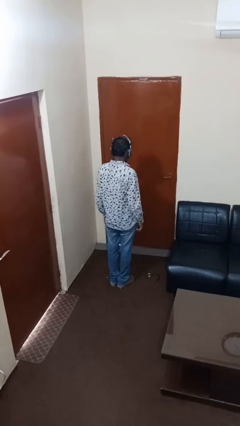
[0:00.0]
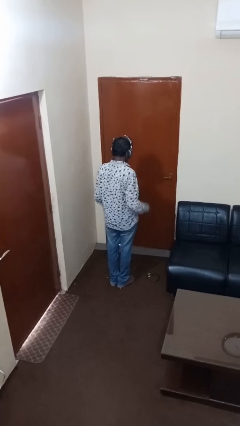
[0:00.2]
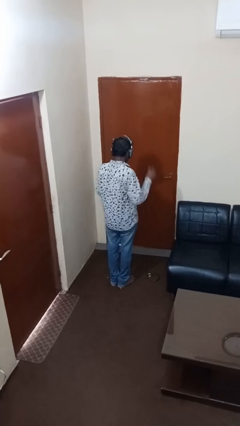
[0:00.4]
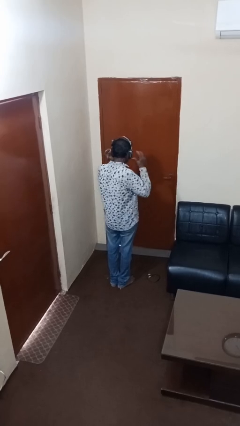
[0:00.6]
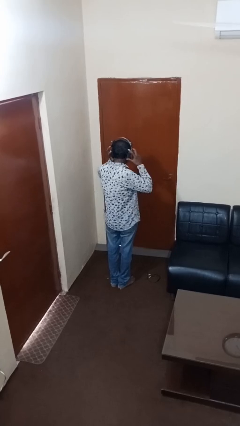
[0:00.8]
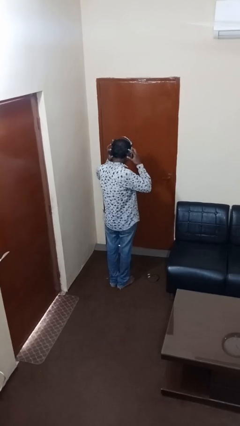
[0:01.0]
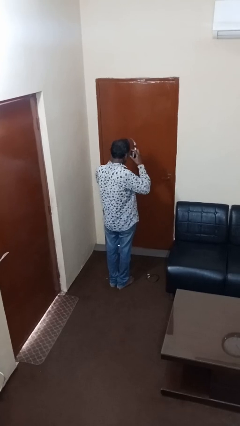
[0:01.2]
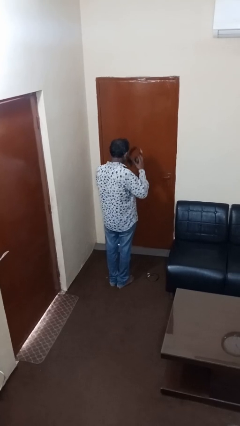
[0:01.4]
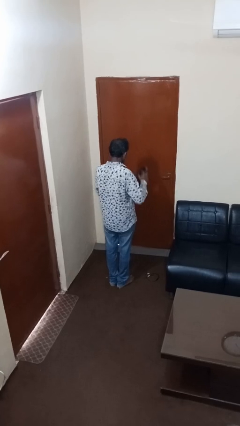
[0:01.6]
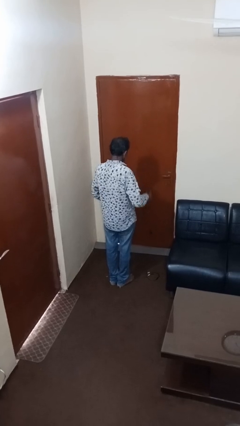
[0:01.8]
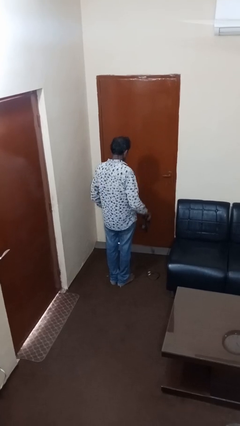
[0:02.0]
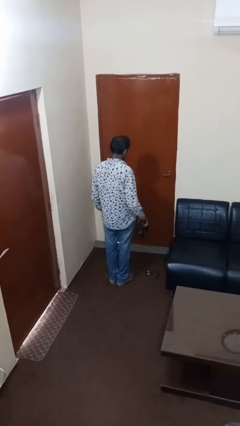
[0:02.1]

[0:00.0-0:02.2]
person takes off headphones

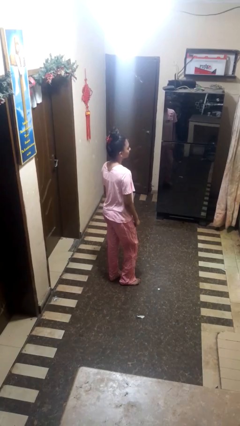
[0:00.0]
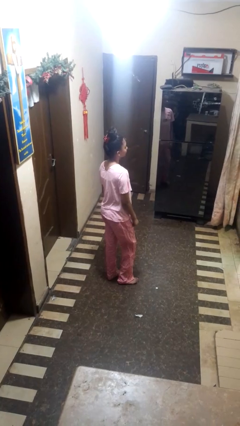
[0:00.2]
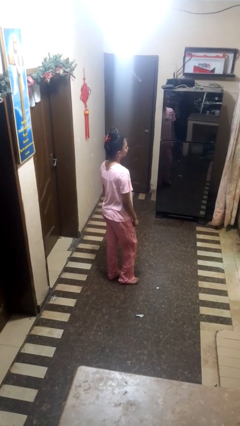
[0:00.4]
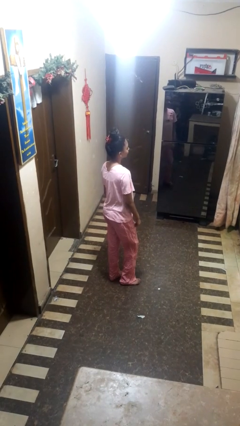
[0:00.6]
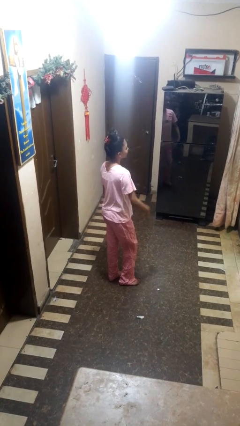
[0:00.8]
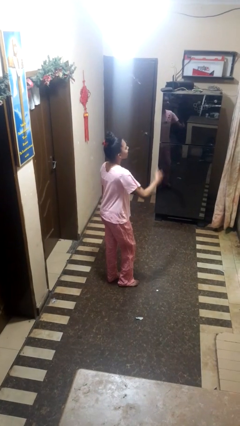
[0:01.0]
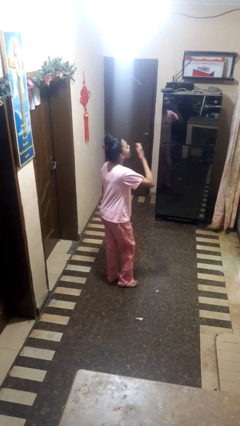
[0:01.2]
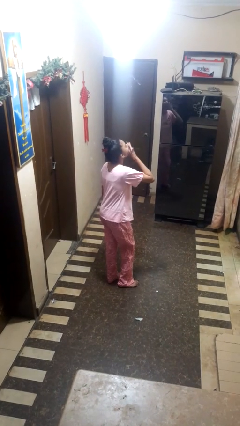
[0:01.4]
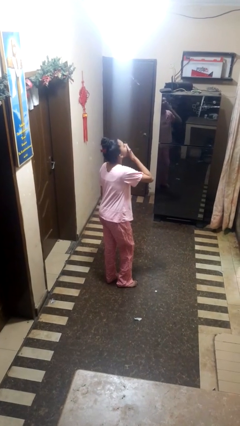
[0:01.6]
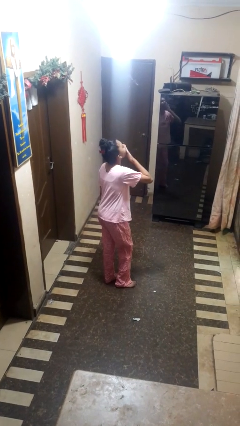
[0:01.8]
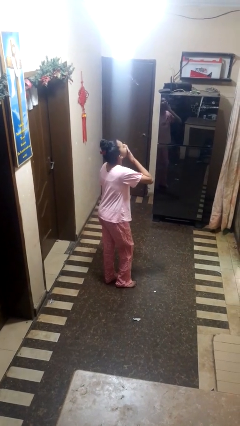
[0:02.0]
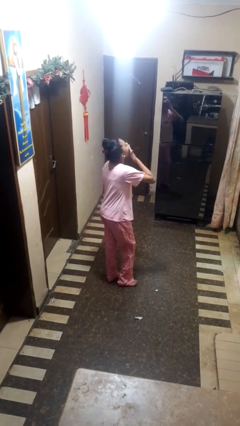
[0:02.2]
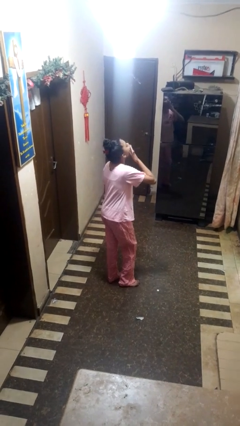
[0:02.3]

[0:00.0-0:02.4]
person yawns

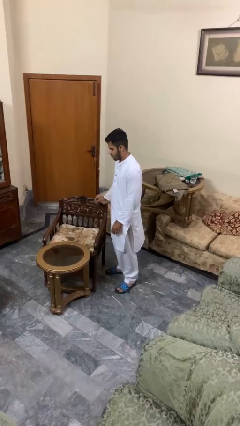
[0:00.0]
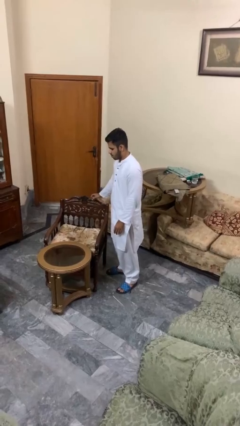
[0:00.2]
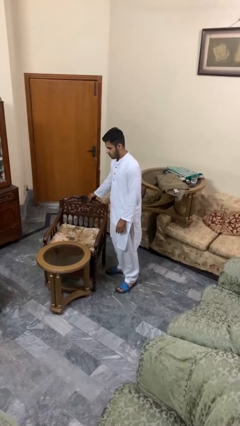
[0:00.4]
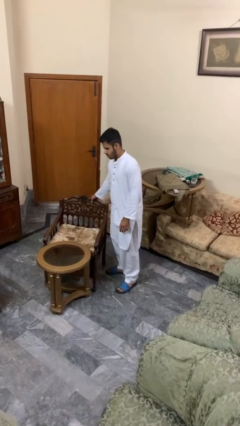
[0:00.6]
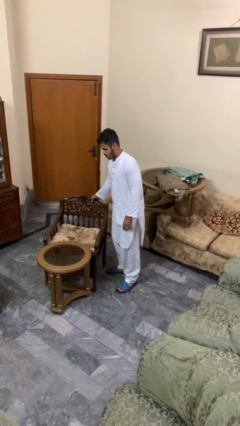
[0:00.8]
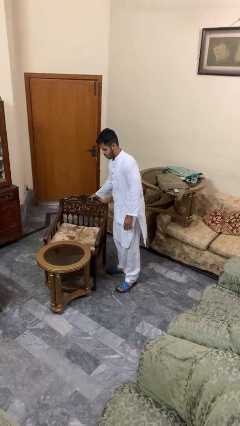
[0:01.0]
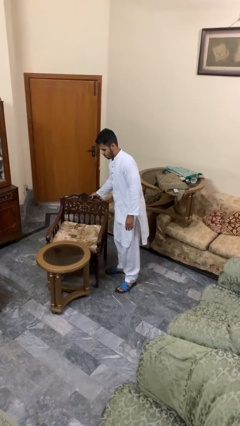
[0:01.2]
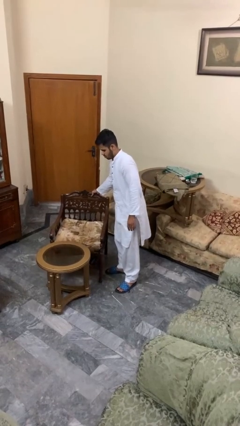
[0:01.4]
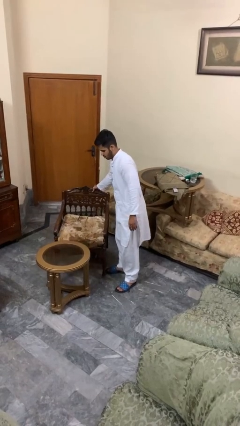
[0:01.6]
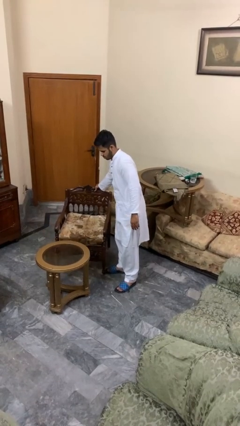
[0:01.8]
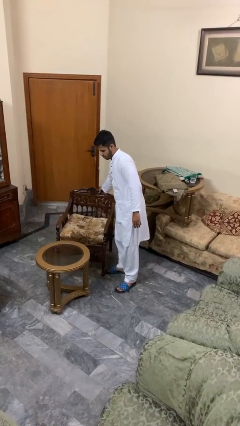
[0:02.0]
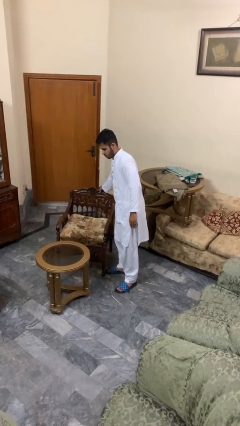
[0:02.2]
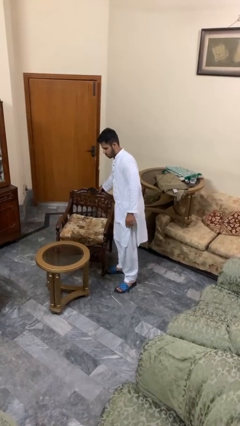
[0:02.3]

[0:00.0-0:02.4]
person pulls out chair

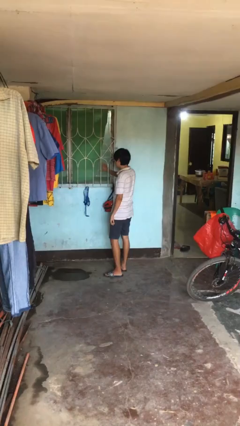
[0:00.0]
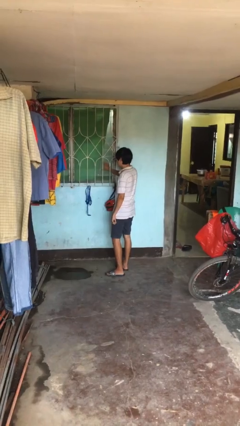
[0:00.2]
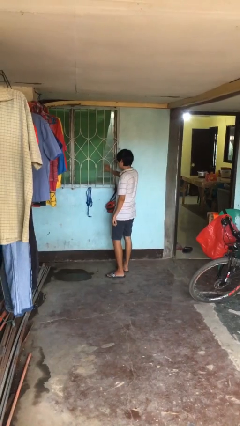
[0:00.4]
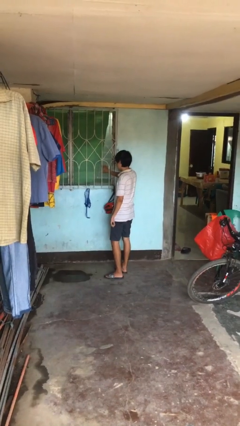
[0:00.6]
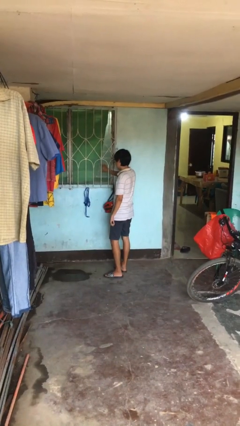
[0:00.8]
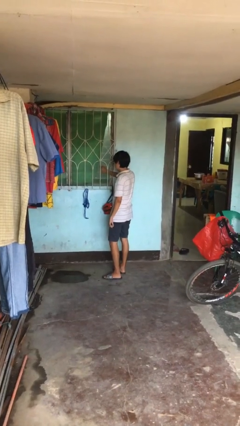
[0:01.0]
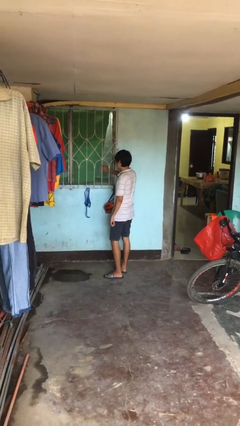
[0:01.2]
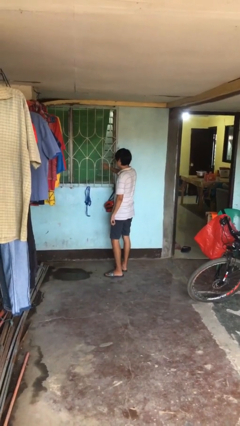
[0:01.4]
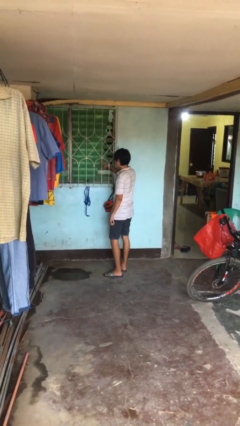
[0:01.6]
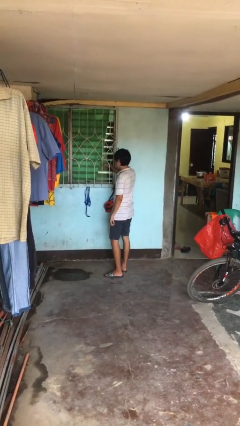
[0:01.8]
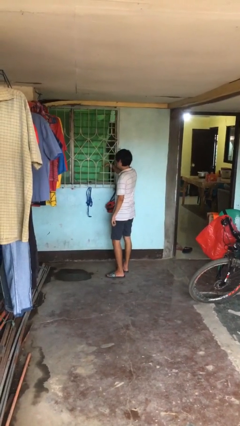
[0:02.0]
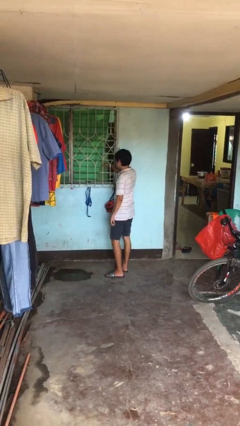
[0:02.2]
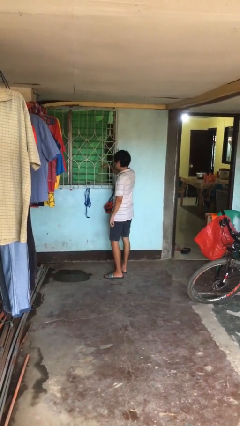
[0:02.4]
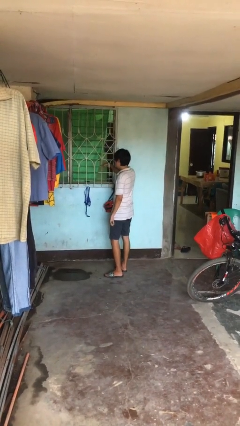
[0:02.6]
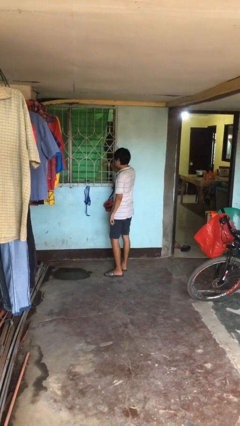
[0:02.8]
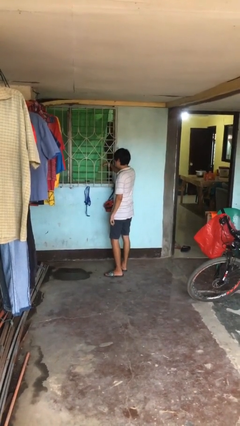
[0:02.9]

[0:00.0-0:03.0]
person opens home window

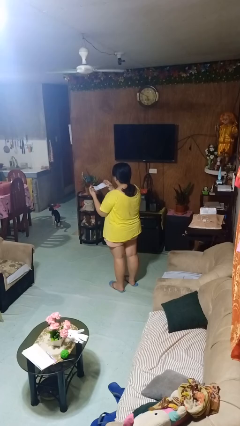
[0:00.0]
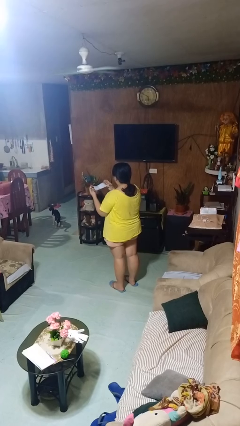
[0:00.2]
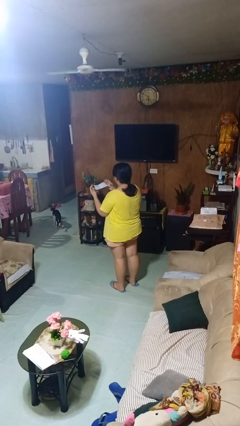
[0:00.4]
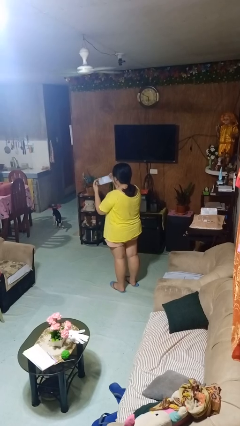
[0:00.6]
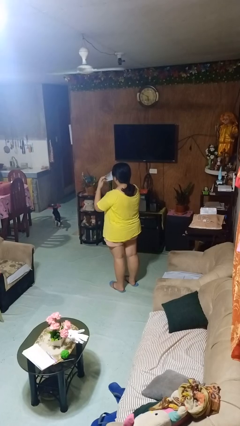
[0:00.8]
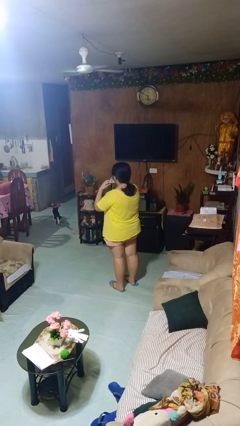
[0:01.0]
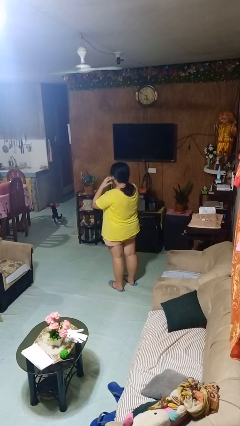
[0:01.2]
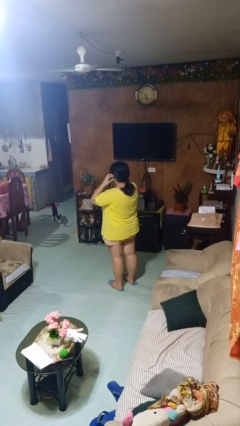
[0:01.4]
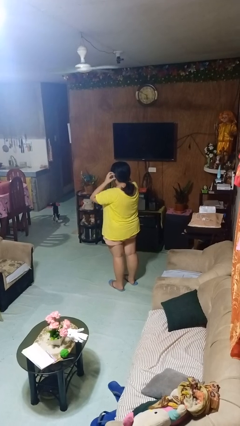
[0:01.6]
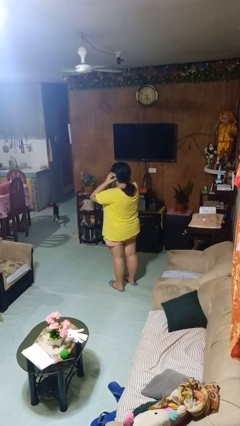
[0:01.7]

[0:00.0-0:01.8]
person puts on facemask

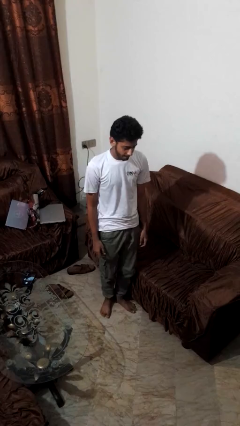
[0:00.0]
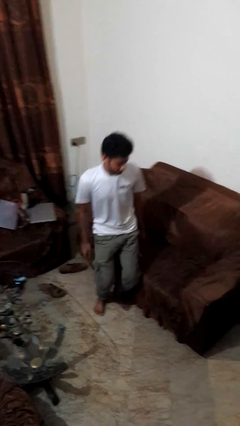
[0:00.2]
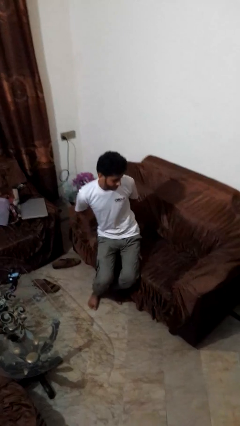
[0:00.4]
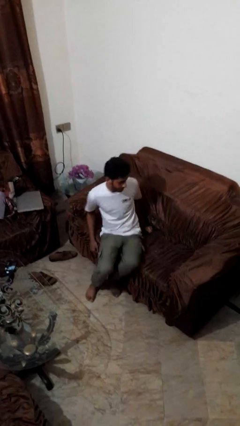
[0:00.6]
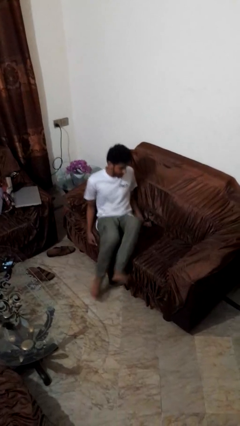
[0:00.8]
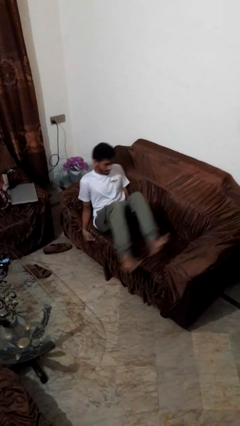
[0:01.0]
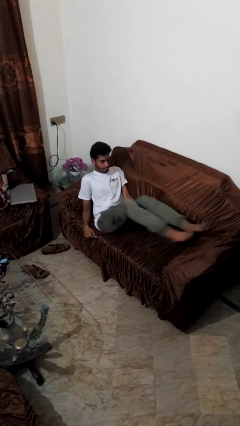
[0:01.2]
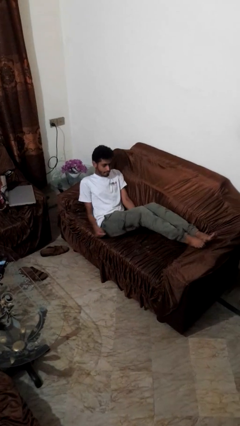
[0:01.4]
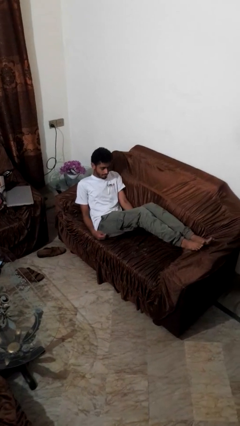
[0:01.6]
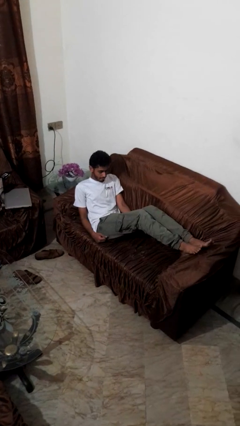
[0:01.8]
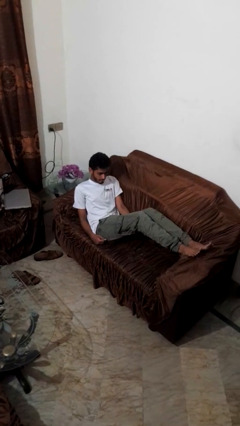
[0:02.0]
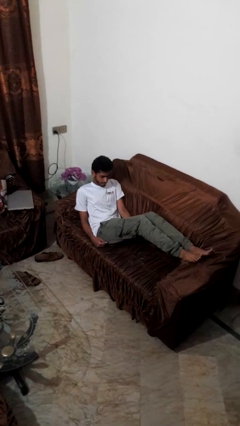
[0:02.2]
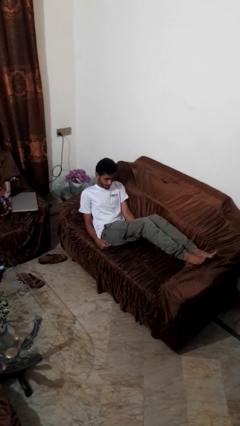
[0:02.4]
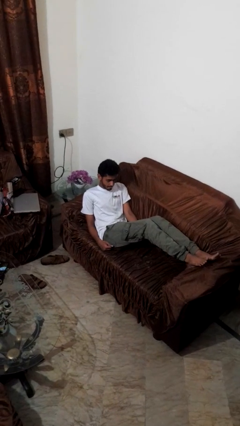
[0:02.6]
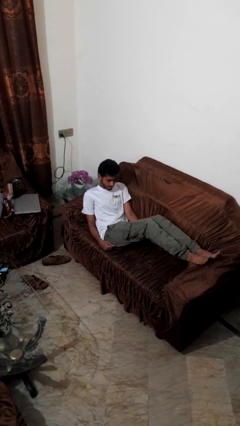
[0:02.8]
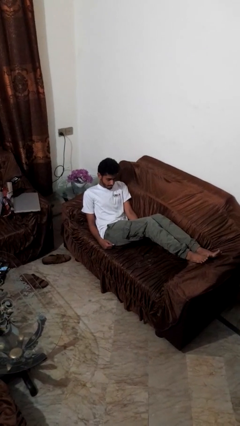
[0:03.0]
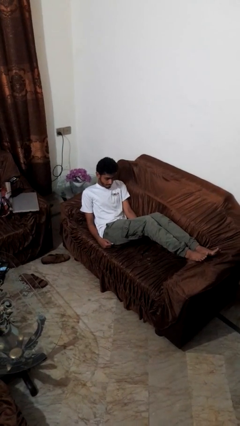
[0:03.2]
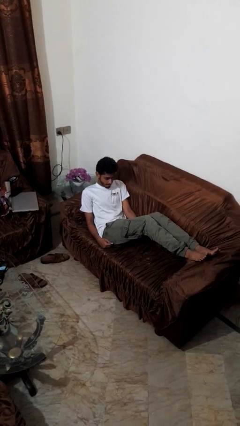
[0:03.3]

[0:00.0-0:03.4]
person lies down on couch

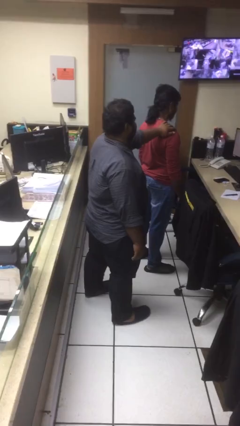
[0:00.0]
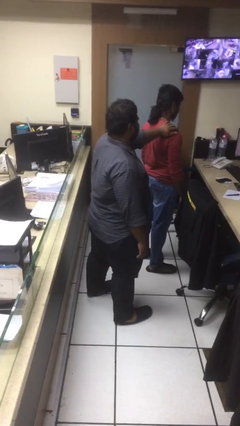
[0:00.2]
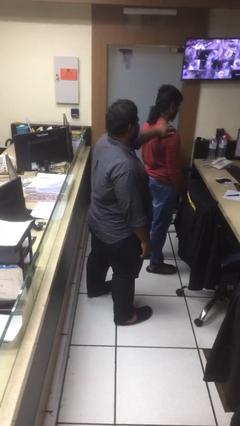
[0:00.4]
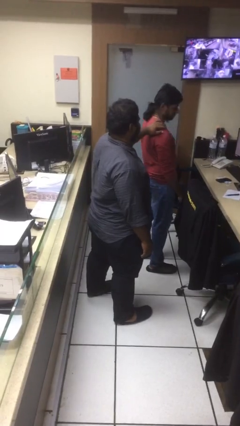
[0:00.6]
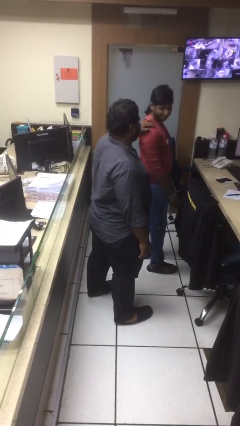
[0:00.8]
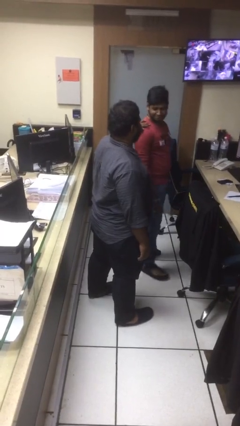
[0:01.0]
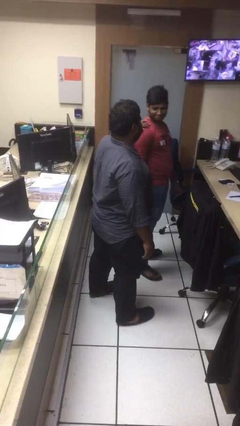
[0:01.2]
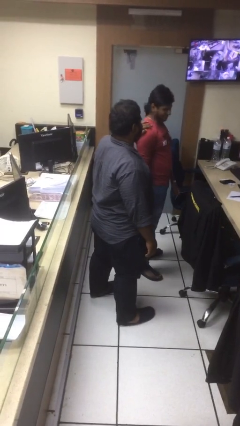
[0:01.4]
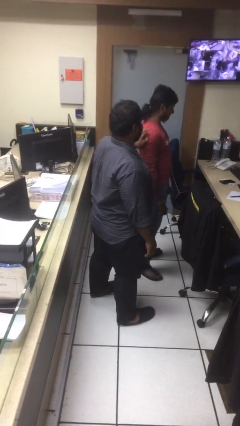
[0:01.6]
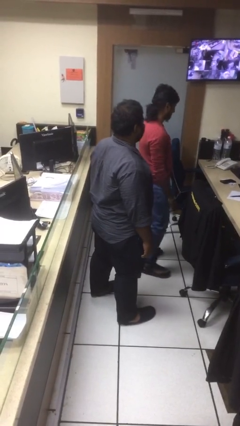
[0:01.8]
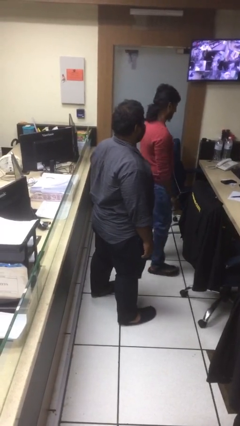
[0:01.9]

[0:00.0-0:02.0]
person spins person around
